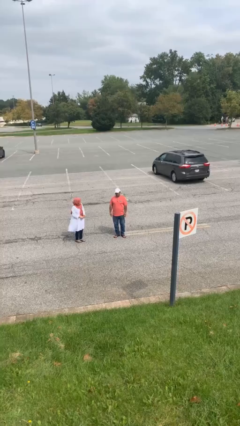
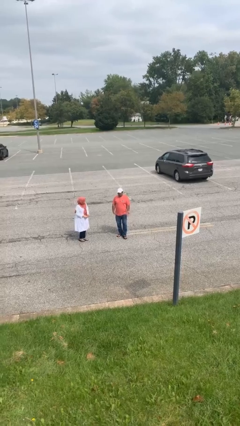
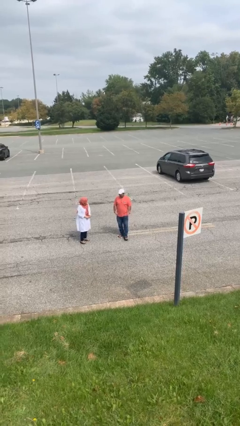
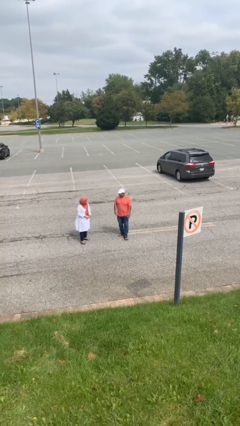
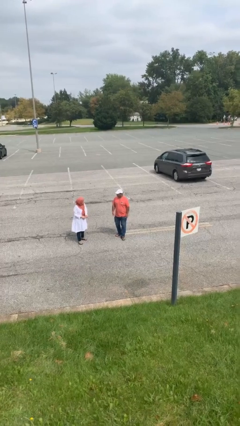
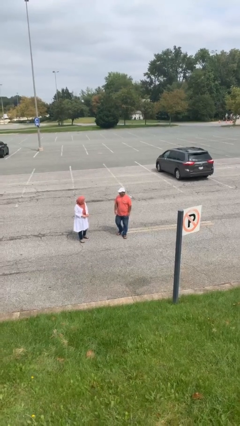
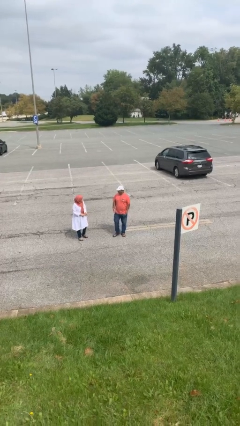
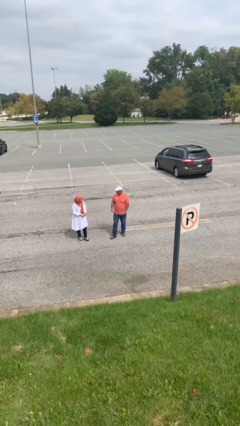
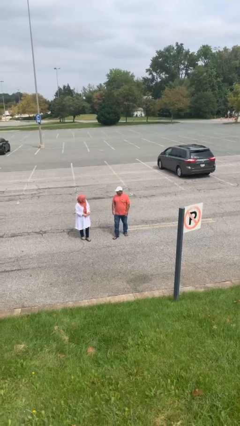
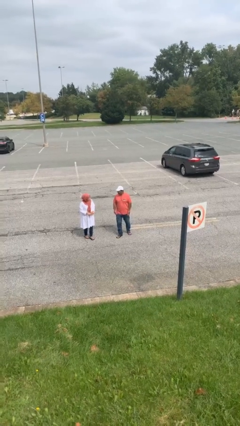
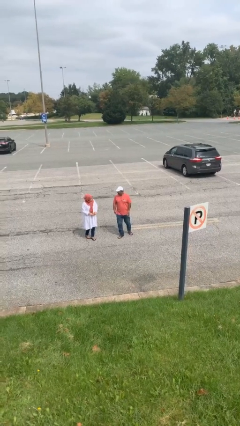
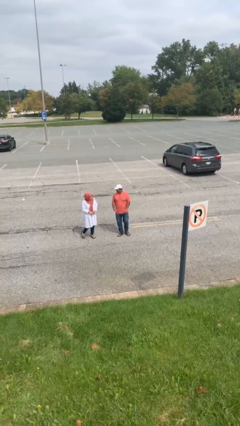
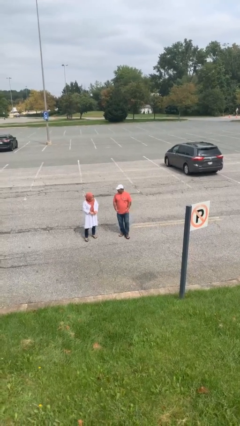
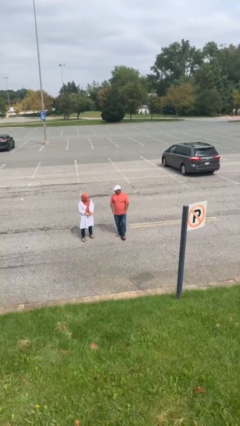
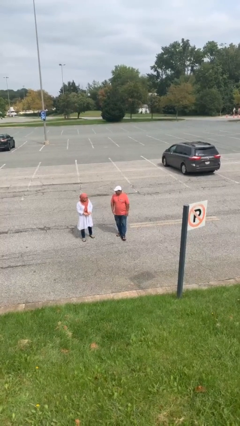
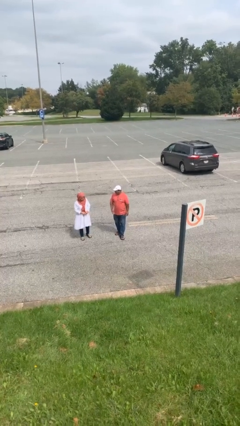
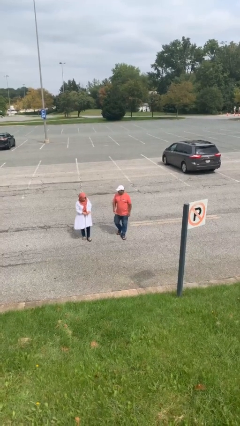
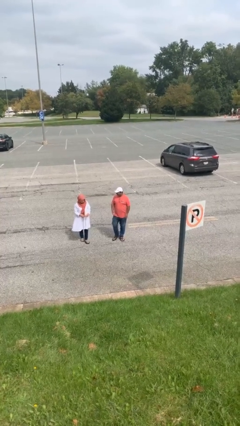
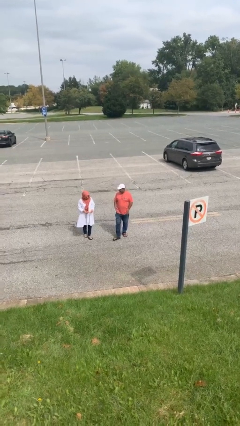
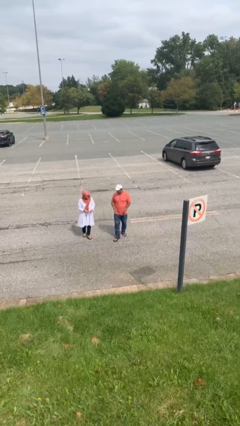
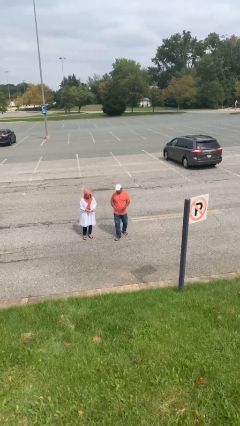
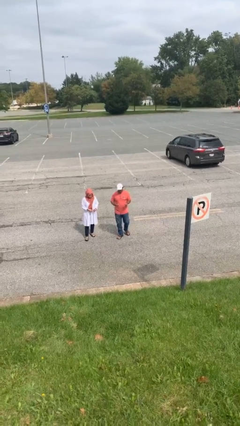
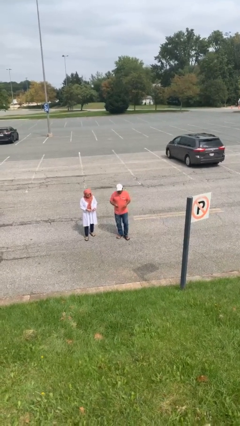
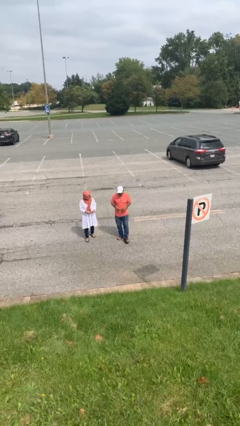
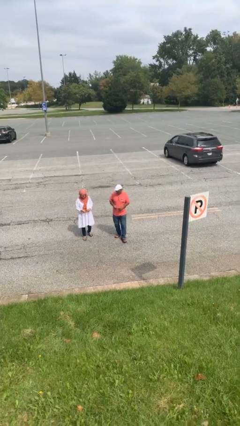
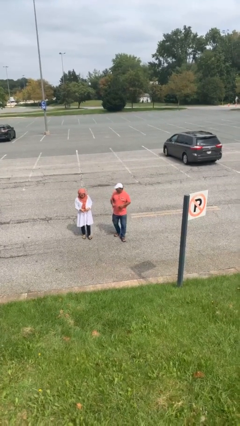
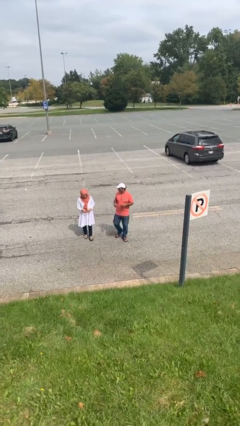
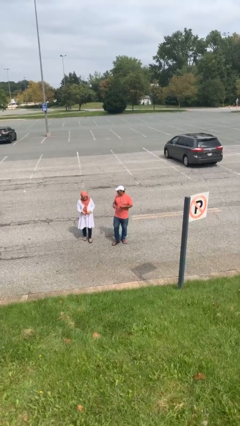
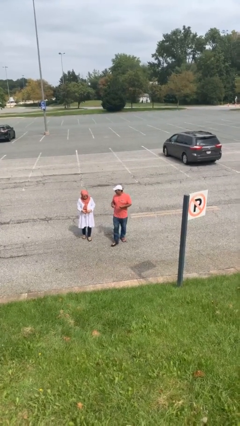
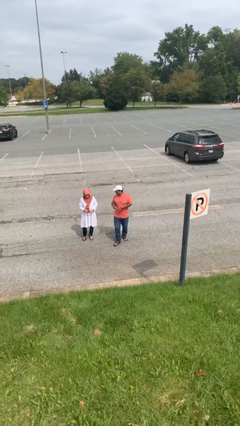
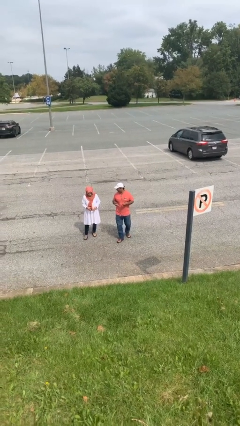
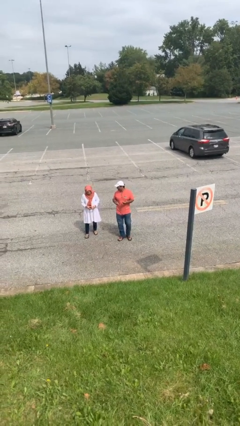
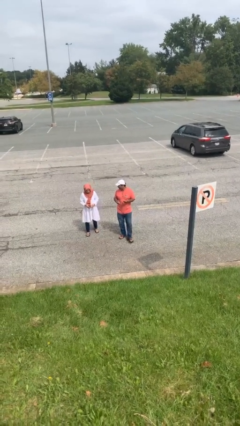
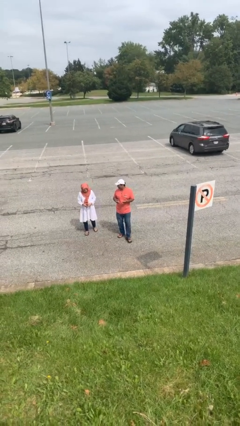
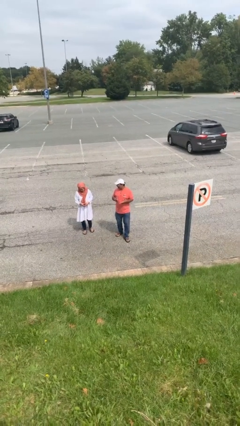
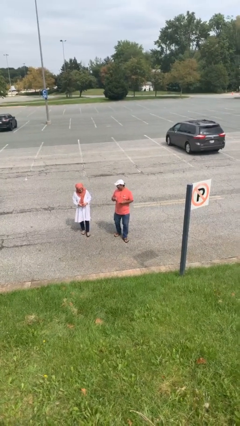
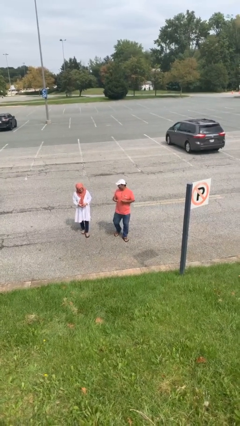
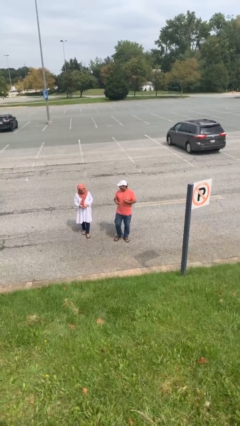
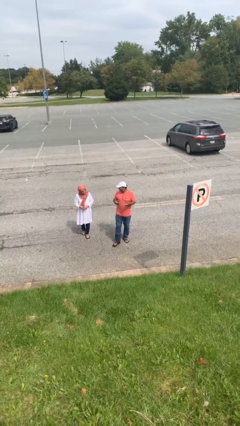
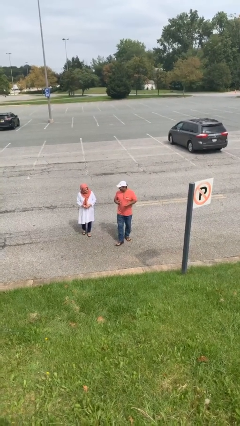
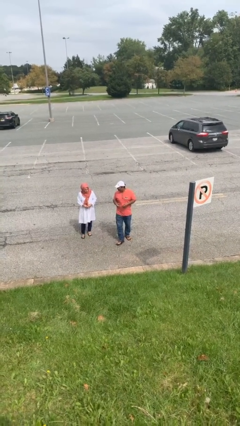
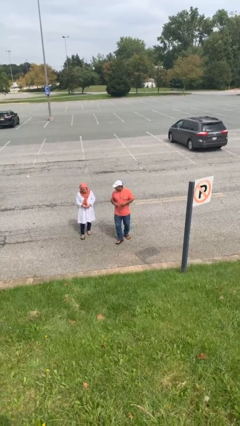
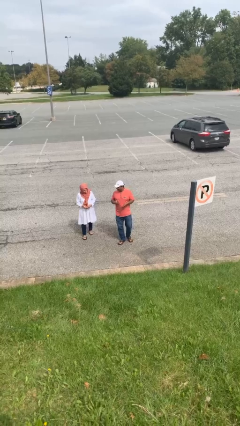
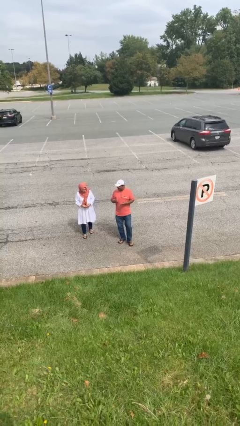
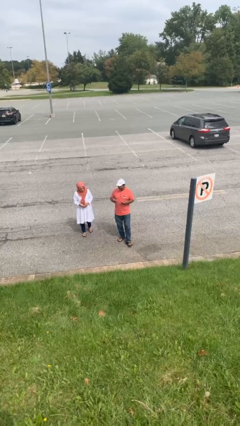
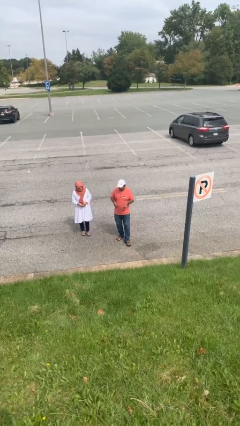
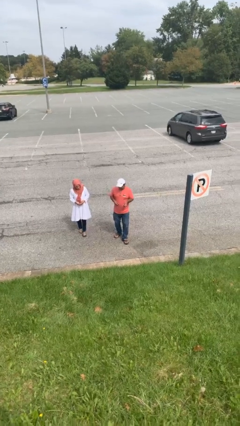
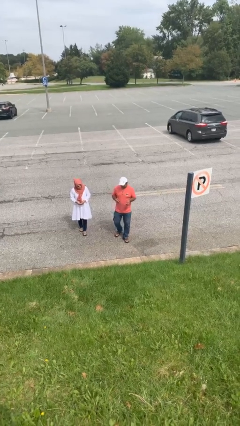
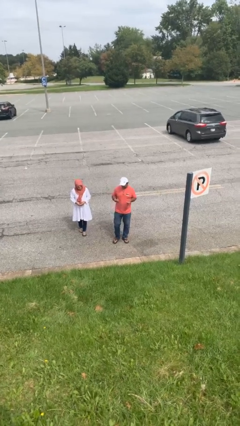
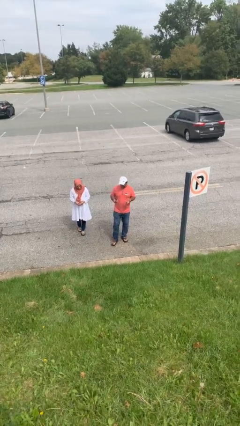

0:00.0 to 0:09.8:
person talks to person

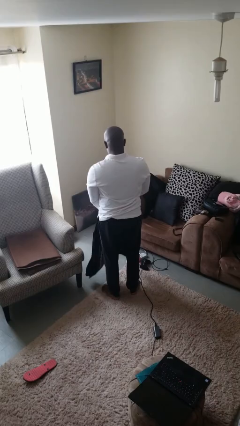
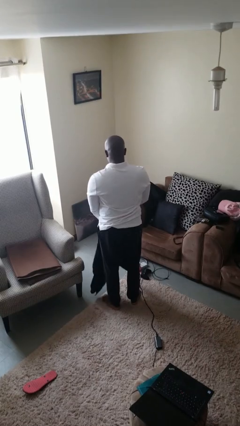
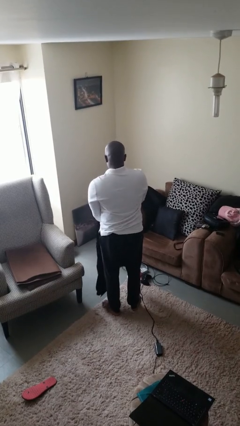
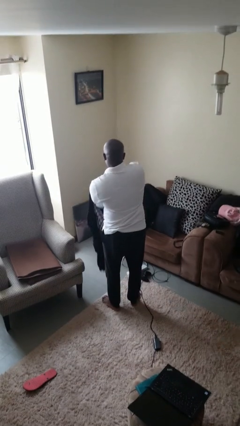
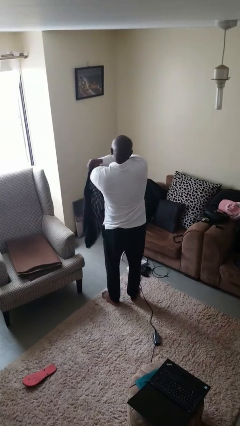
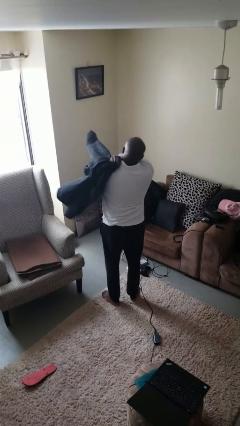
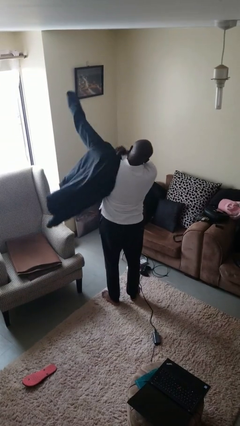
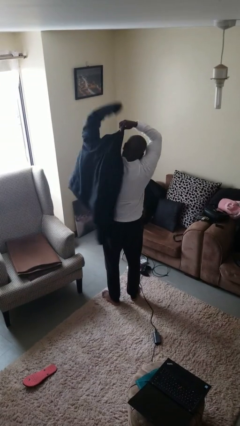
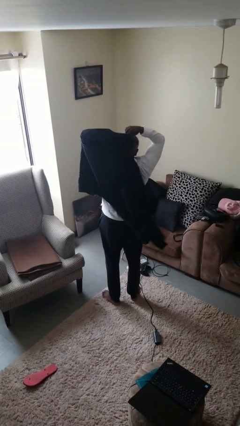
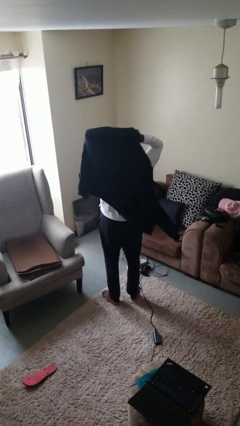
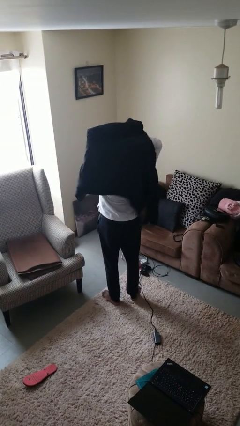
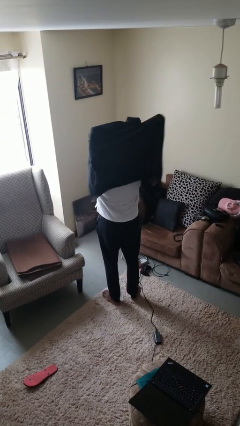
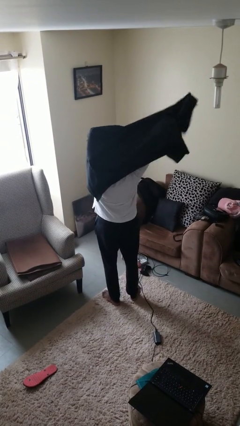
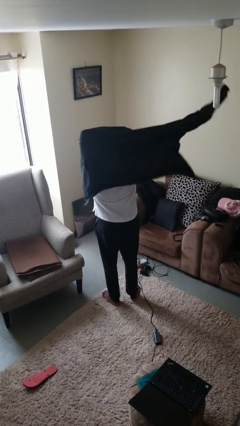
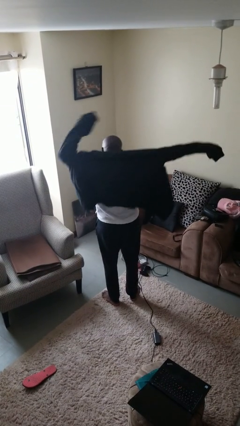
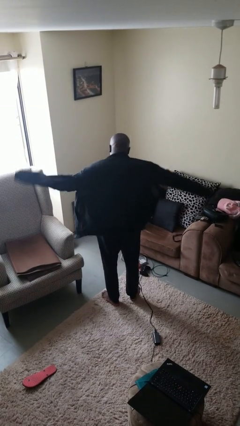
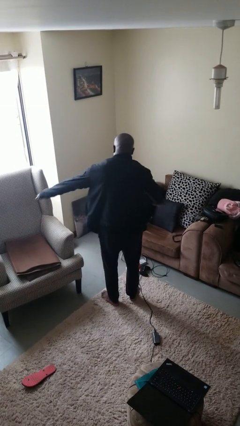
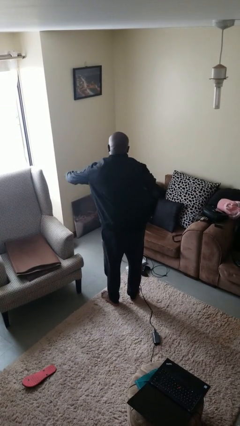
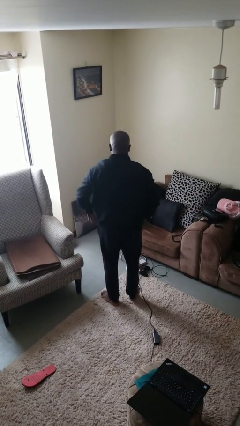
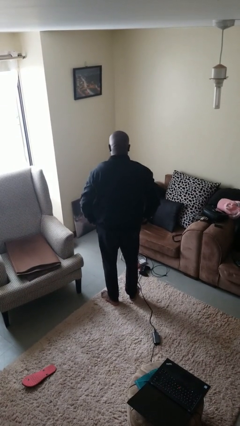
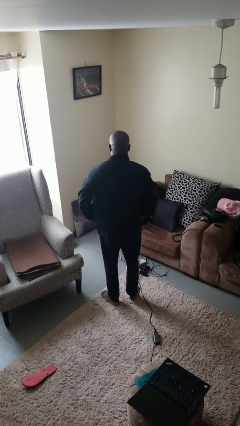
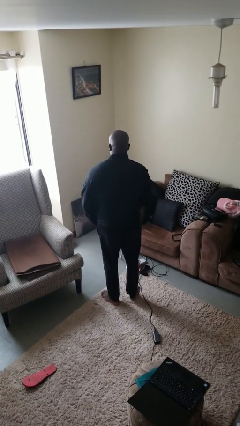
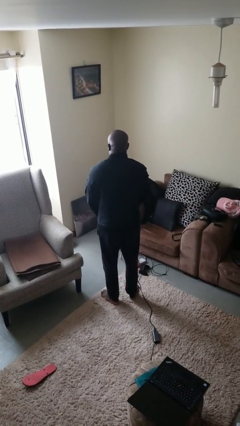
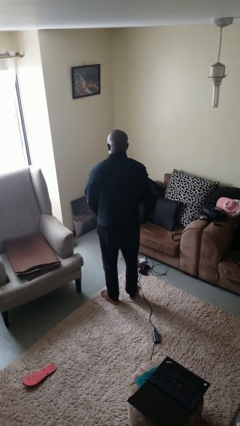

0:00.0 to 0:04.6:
person puts on jacket

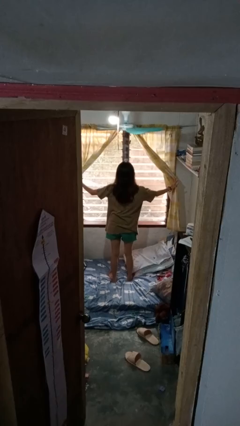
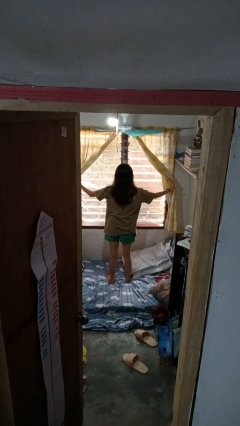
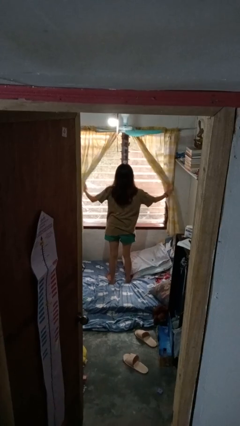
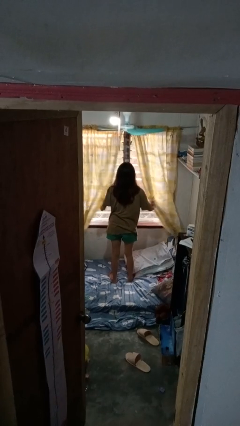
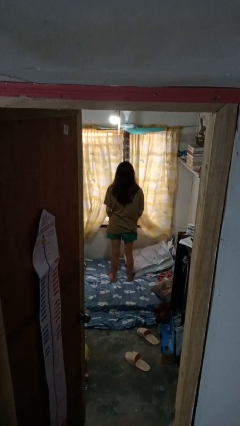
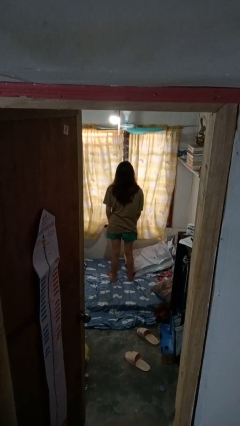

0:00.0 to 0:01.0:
person closes curtains

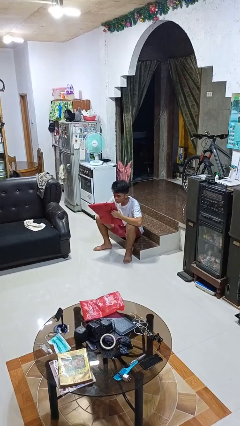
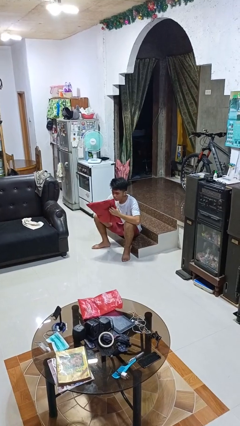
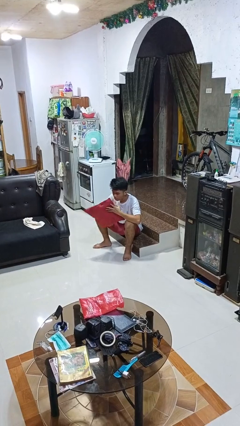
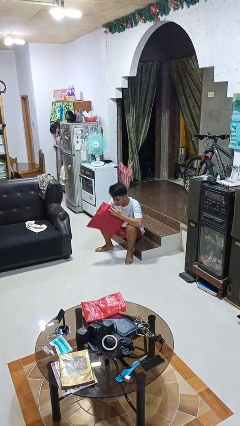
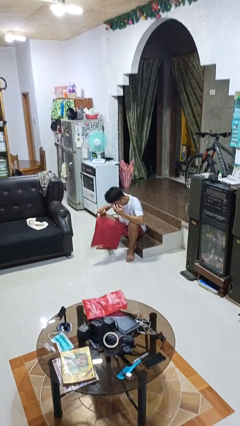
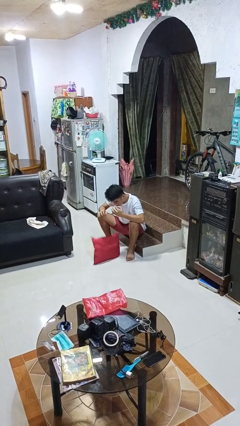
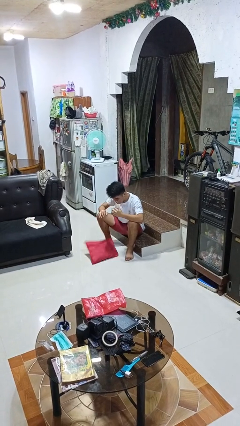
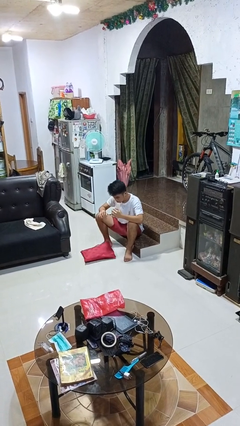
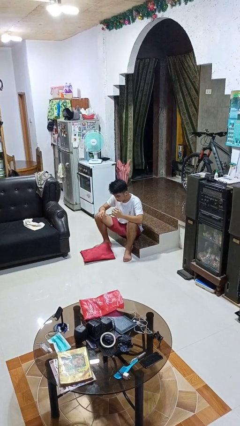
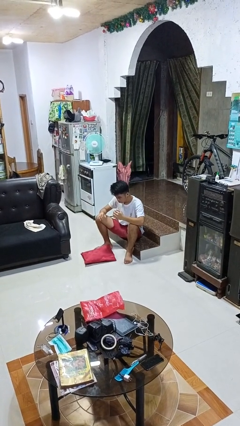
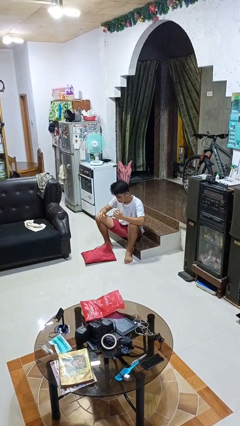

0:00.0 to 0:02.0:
person drops object

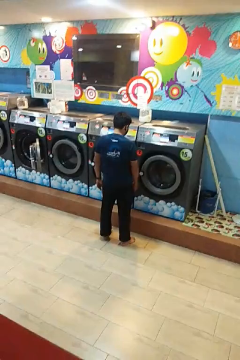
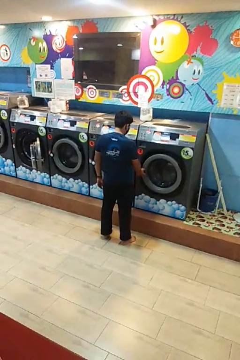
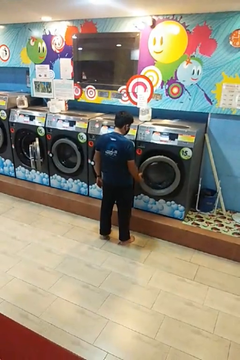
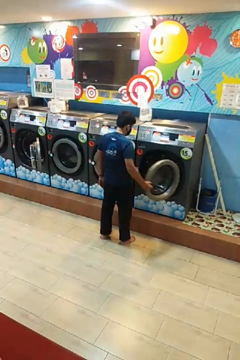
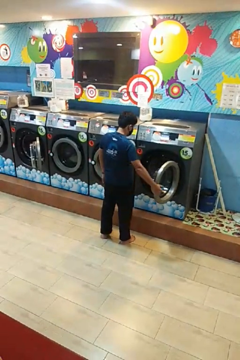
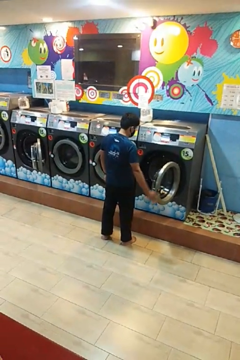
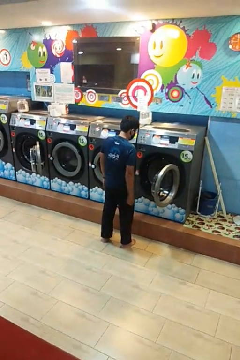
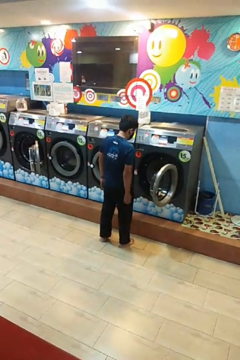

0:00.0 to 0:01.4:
person opens clothes washer
